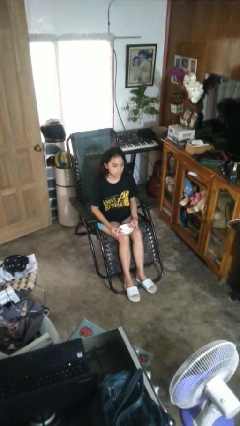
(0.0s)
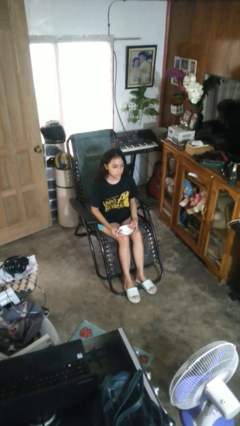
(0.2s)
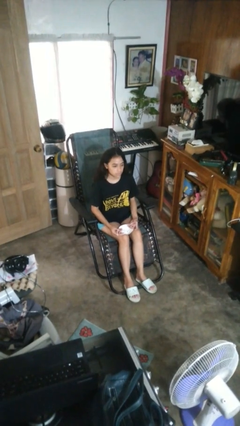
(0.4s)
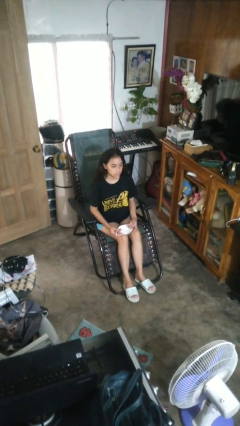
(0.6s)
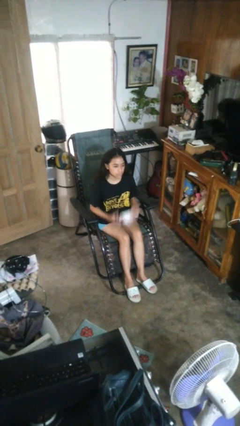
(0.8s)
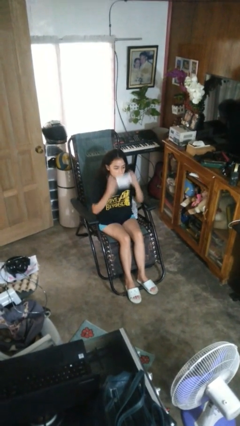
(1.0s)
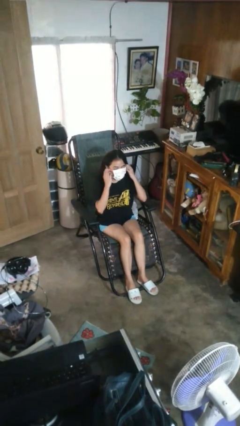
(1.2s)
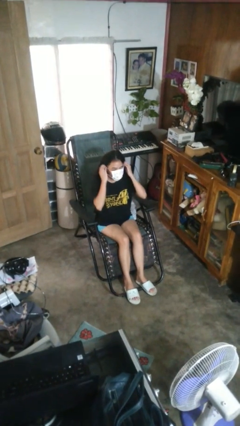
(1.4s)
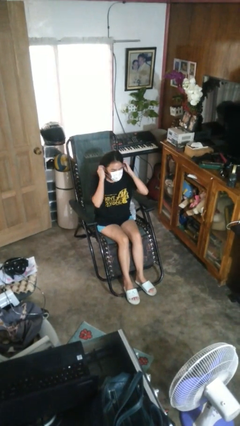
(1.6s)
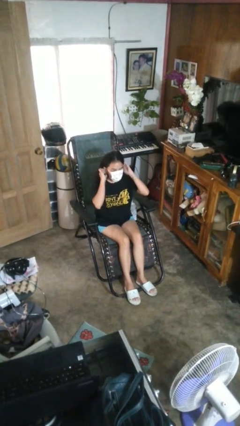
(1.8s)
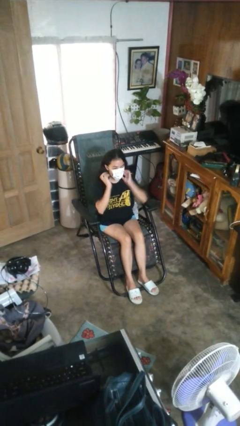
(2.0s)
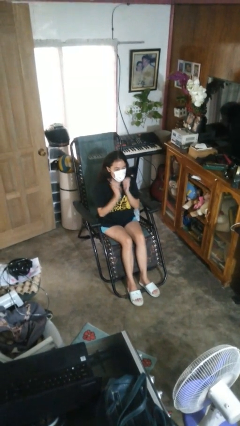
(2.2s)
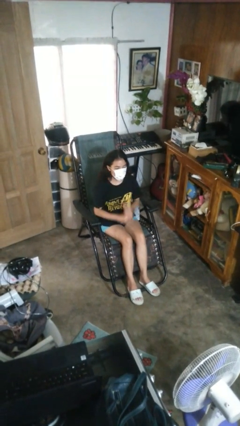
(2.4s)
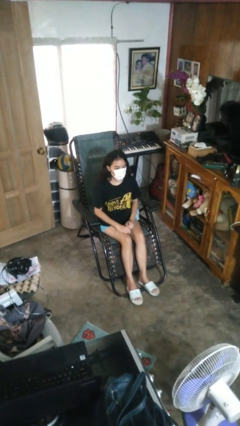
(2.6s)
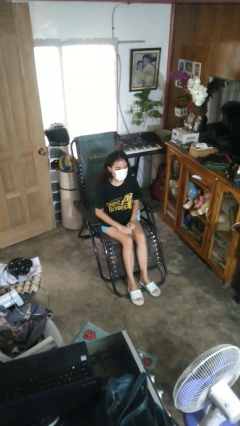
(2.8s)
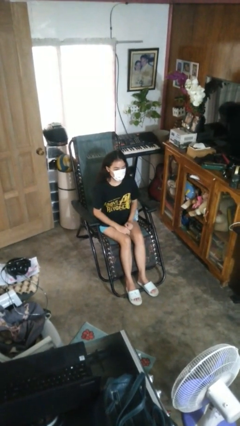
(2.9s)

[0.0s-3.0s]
person puts on facemask

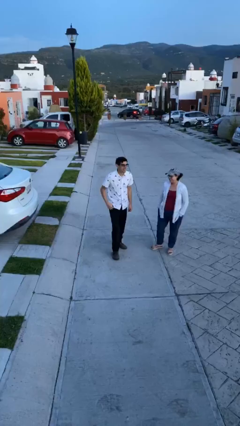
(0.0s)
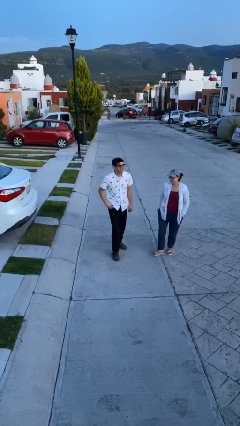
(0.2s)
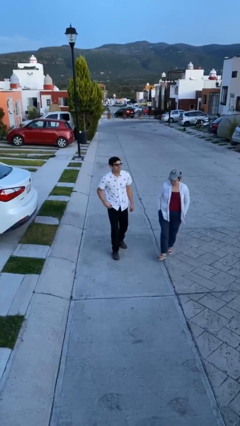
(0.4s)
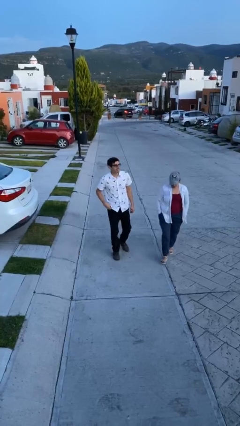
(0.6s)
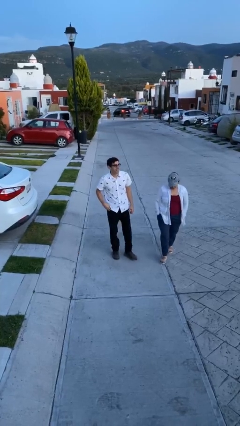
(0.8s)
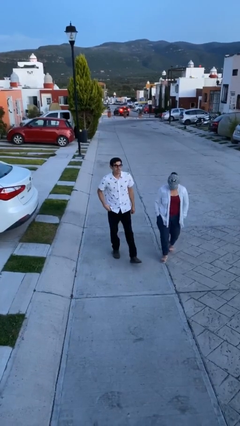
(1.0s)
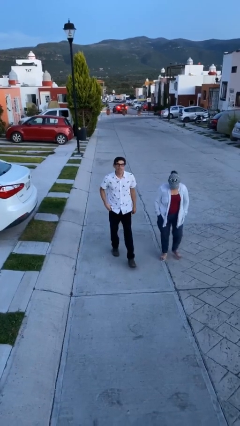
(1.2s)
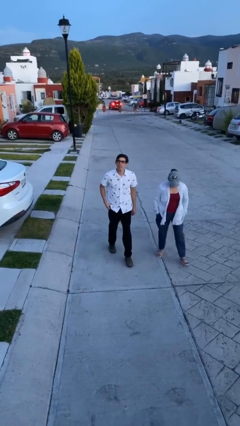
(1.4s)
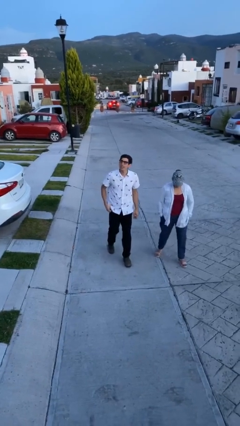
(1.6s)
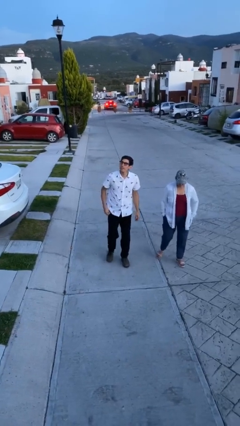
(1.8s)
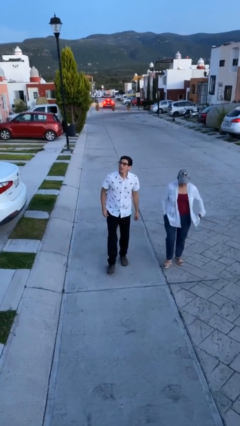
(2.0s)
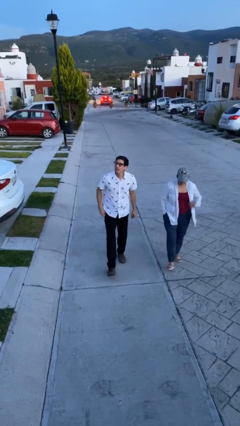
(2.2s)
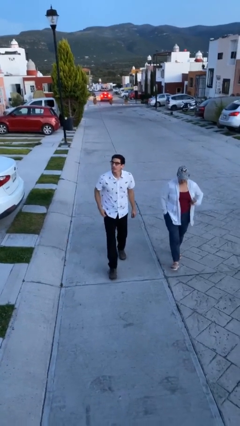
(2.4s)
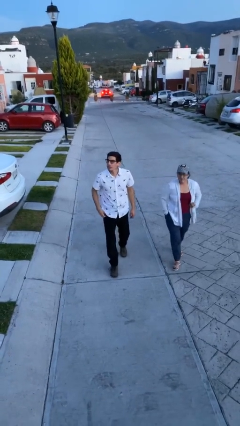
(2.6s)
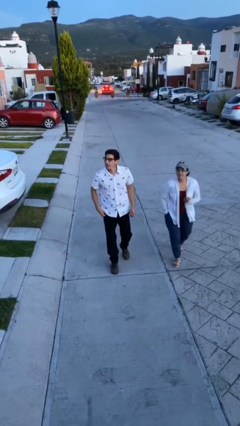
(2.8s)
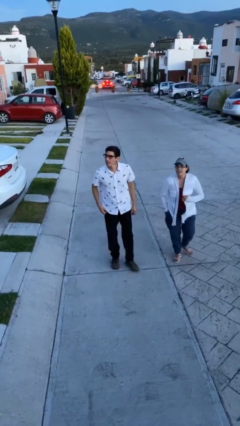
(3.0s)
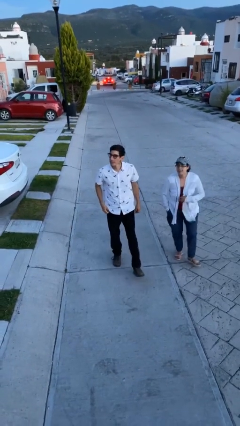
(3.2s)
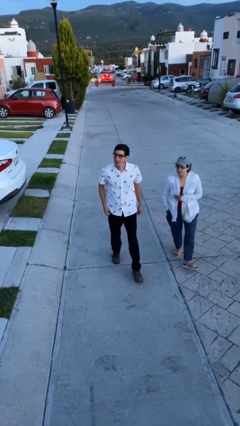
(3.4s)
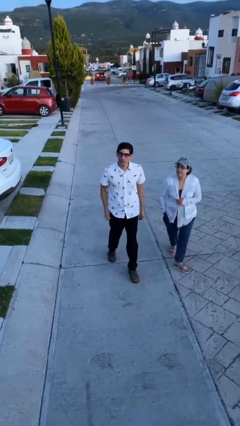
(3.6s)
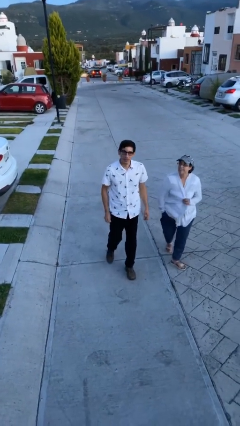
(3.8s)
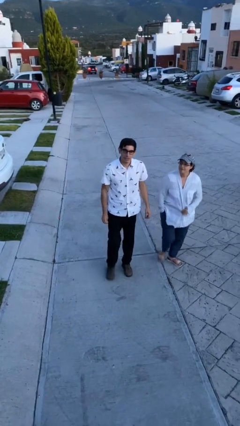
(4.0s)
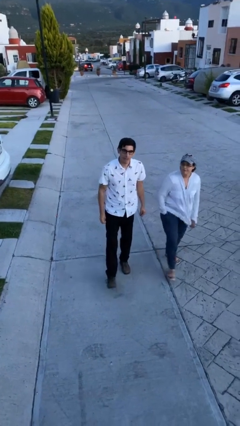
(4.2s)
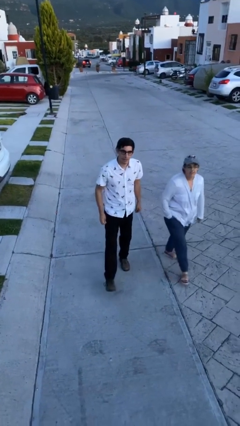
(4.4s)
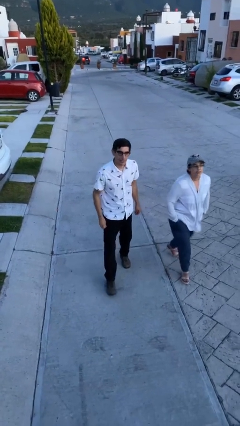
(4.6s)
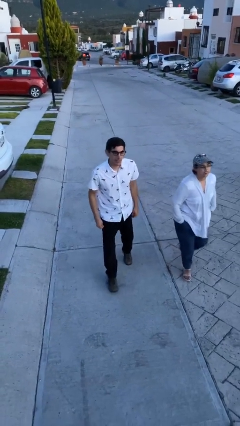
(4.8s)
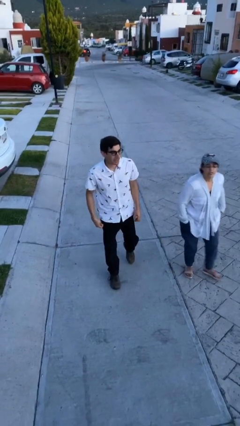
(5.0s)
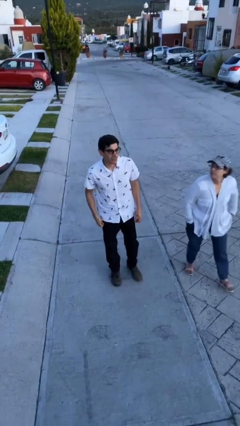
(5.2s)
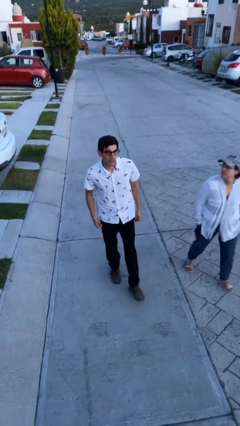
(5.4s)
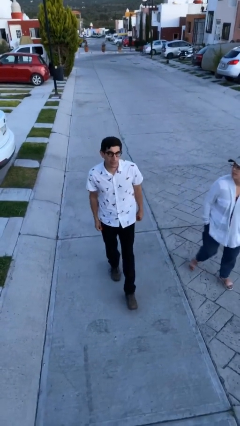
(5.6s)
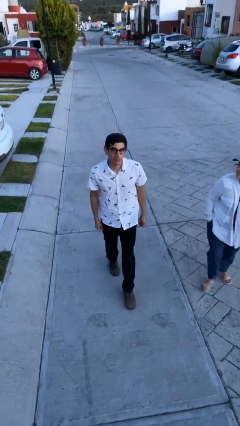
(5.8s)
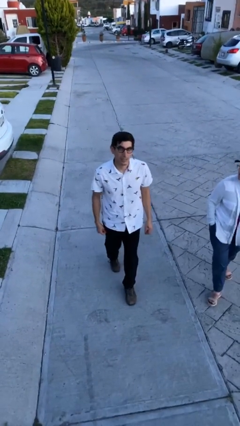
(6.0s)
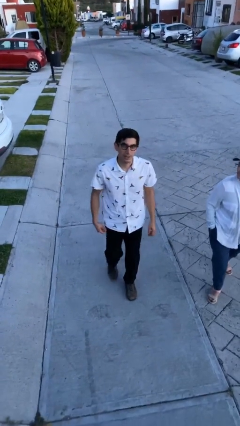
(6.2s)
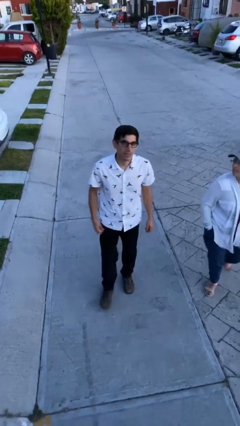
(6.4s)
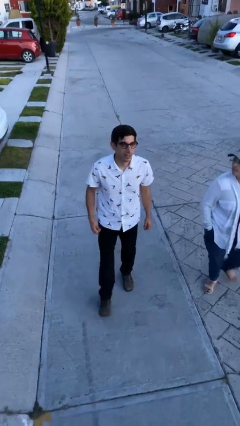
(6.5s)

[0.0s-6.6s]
person talks to person

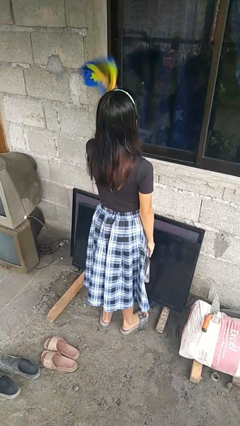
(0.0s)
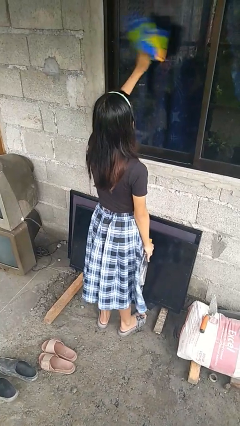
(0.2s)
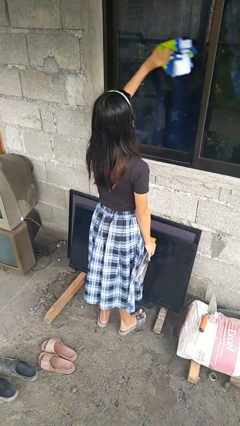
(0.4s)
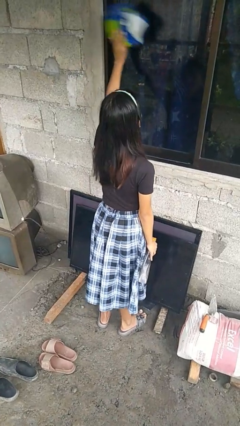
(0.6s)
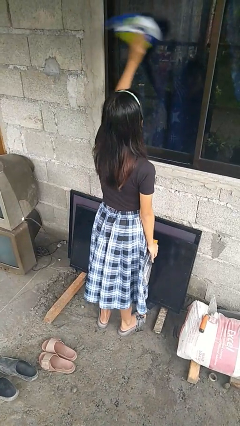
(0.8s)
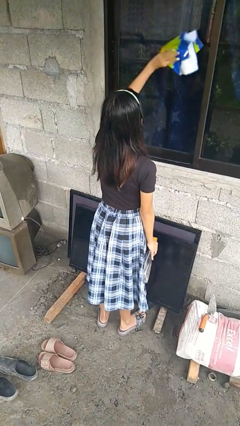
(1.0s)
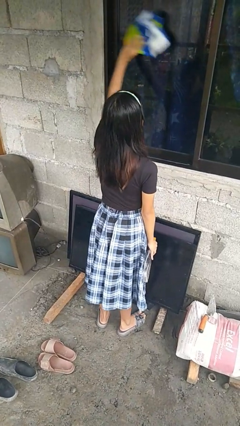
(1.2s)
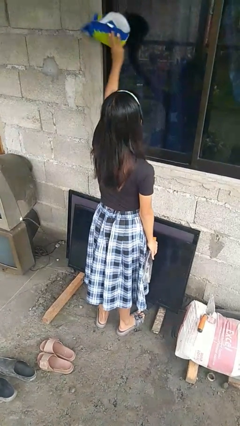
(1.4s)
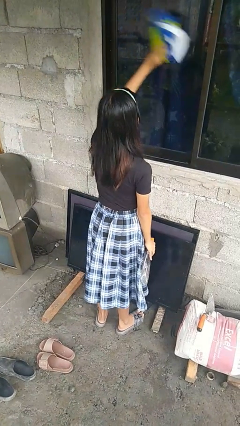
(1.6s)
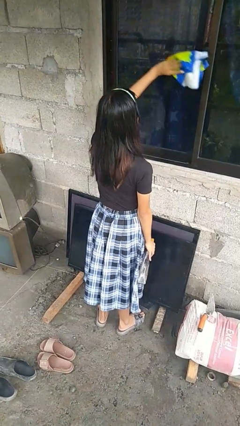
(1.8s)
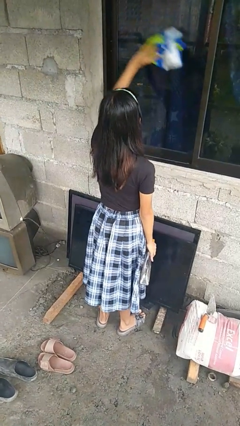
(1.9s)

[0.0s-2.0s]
person washes window

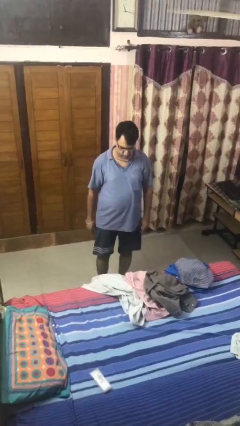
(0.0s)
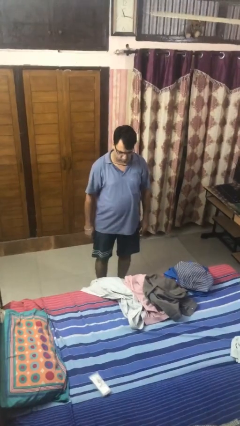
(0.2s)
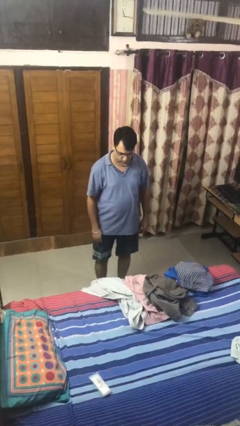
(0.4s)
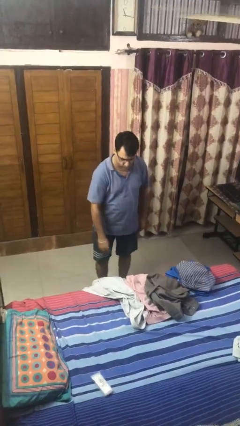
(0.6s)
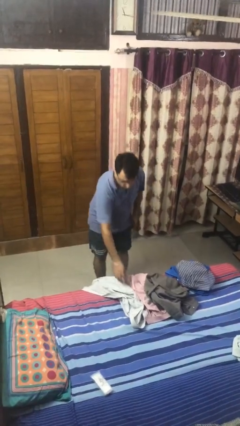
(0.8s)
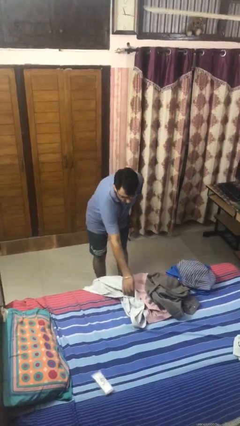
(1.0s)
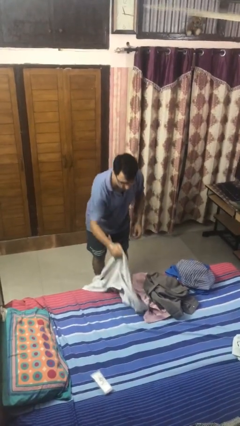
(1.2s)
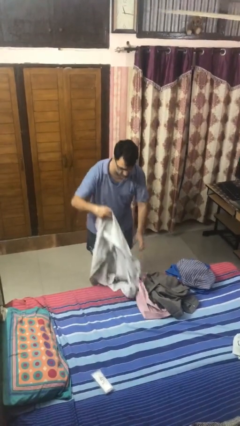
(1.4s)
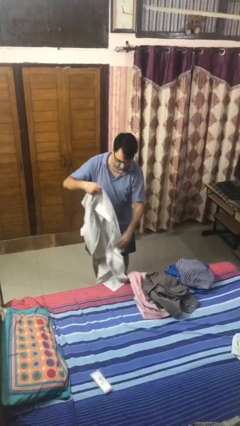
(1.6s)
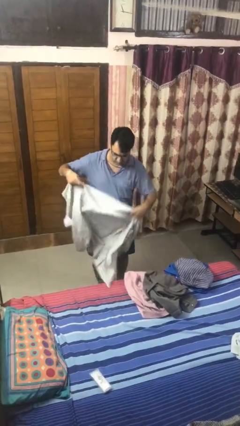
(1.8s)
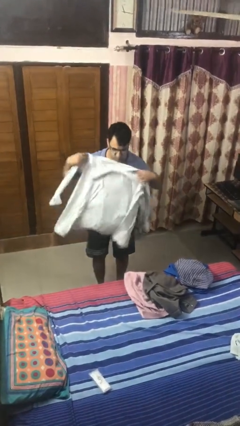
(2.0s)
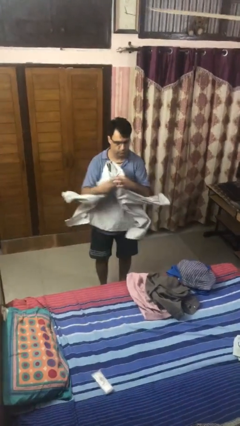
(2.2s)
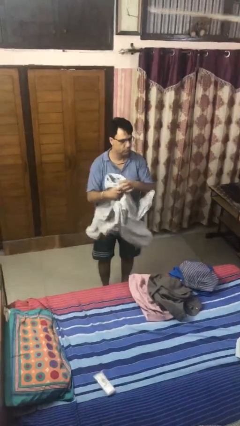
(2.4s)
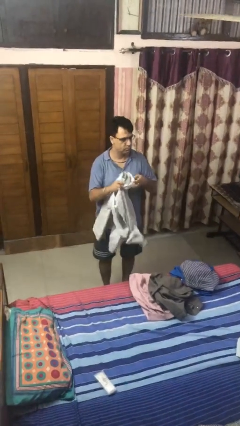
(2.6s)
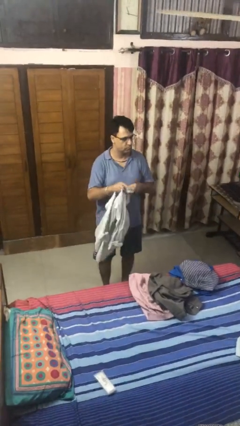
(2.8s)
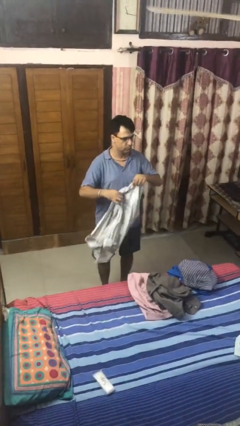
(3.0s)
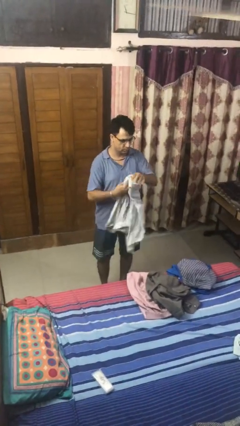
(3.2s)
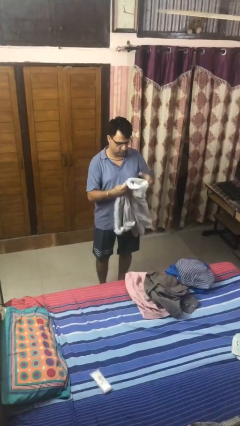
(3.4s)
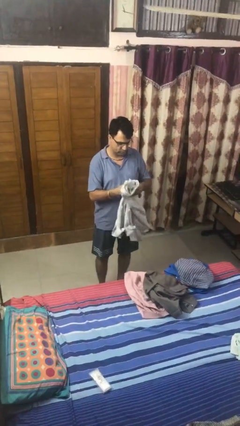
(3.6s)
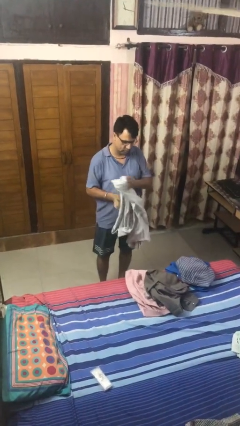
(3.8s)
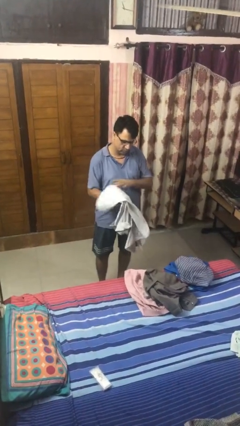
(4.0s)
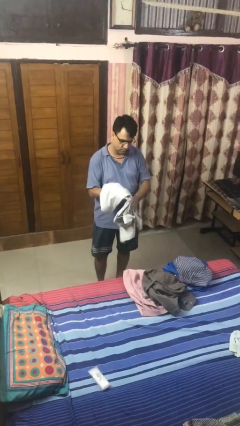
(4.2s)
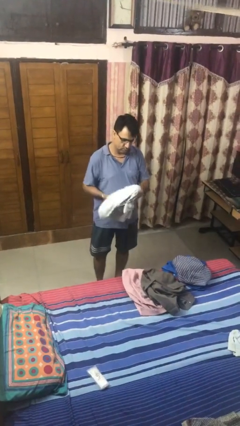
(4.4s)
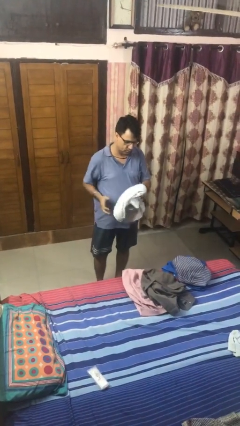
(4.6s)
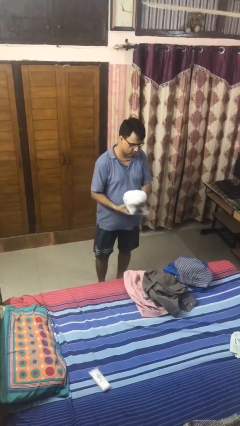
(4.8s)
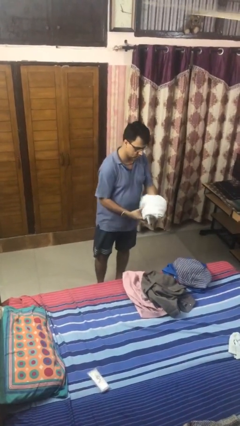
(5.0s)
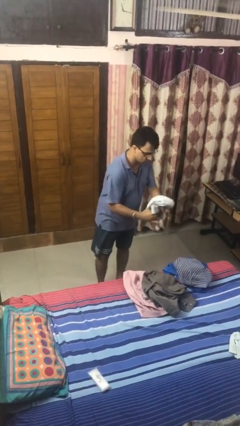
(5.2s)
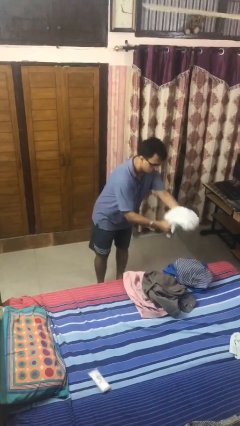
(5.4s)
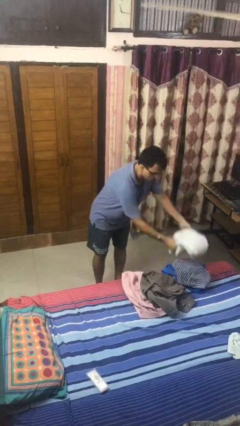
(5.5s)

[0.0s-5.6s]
person folds shirt
